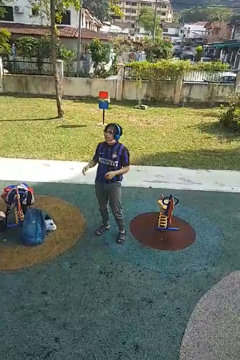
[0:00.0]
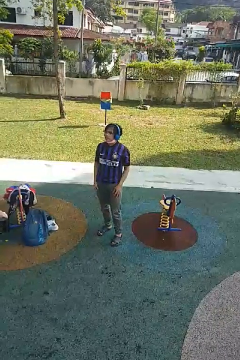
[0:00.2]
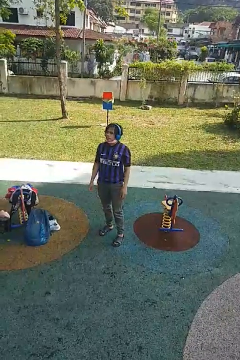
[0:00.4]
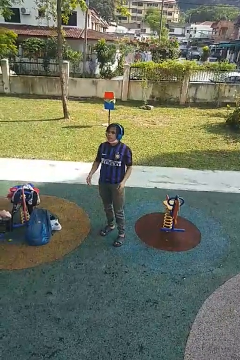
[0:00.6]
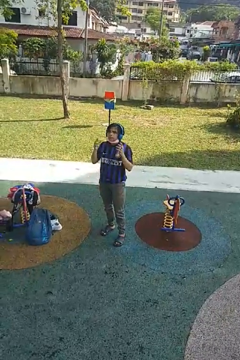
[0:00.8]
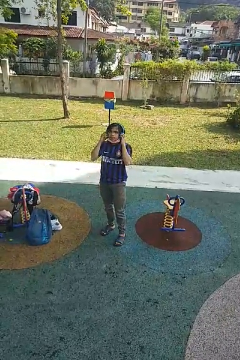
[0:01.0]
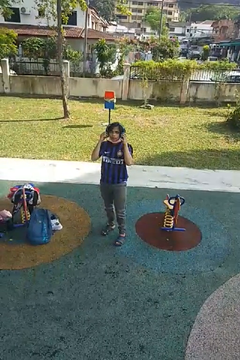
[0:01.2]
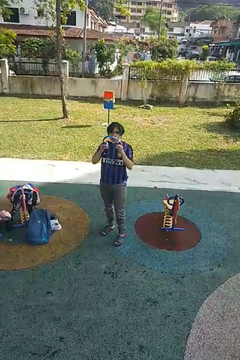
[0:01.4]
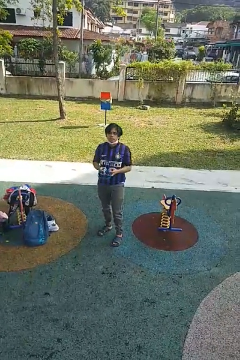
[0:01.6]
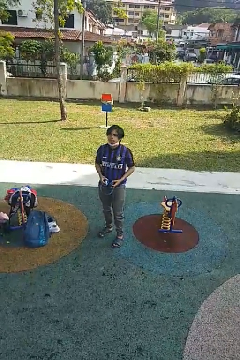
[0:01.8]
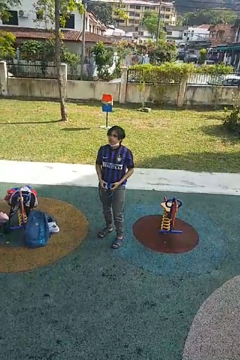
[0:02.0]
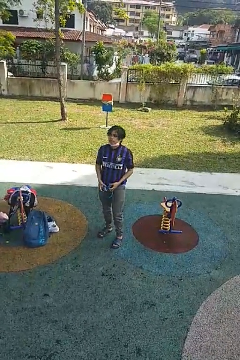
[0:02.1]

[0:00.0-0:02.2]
person takes off headphones

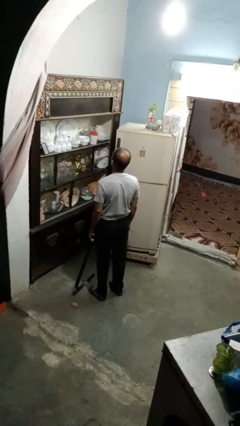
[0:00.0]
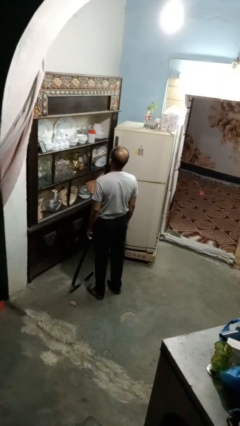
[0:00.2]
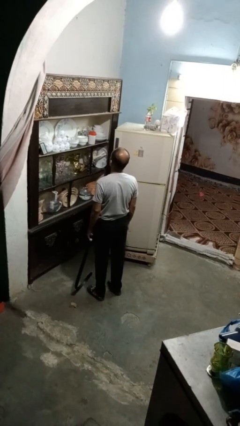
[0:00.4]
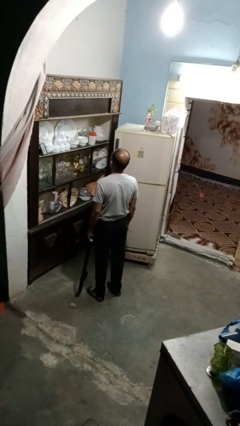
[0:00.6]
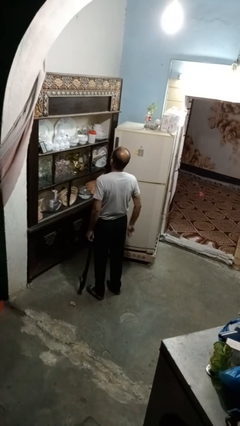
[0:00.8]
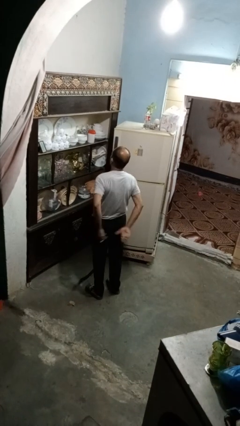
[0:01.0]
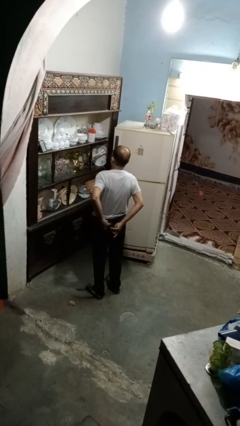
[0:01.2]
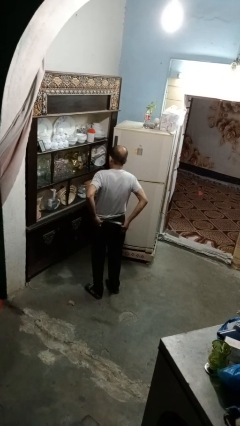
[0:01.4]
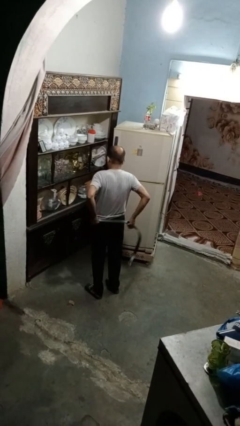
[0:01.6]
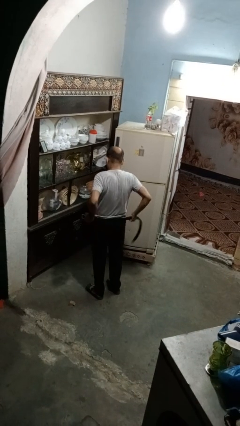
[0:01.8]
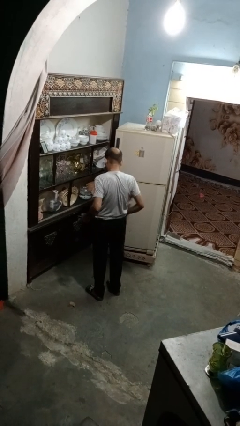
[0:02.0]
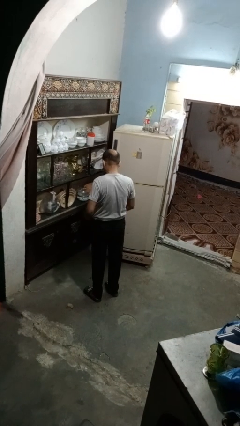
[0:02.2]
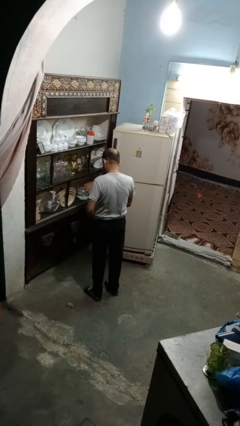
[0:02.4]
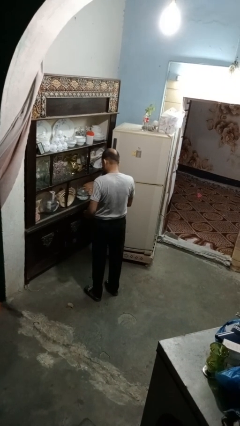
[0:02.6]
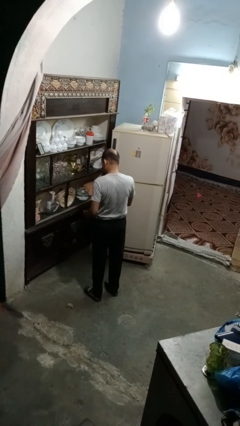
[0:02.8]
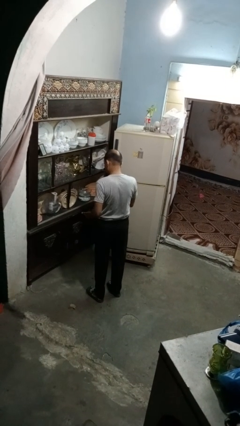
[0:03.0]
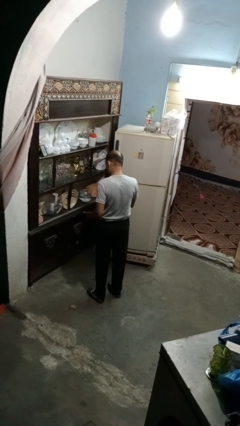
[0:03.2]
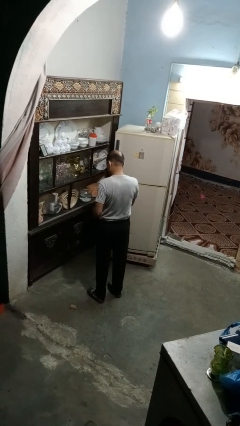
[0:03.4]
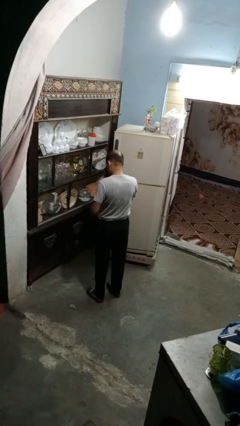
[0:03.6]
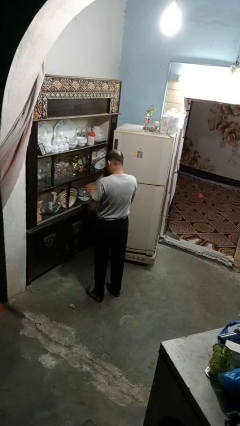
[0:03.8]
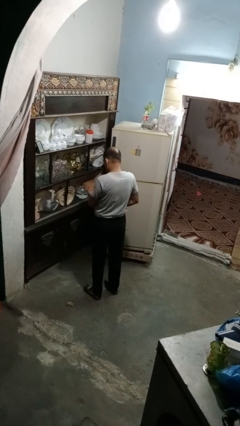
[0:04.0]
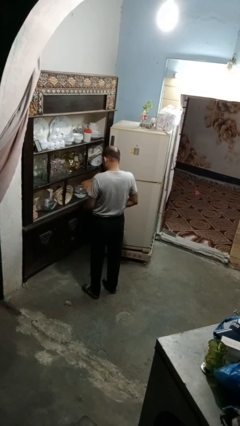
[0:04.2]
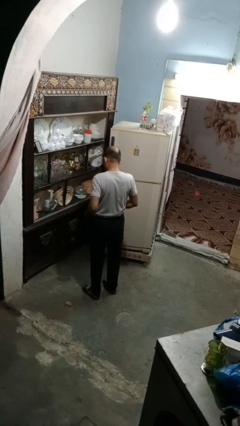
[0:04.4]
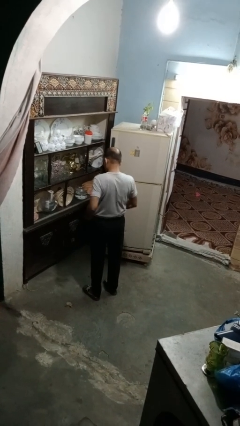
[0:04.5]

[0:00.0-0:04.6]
person puts on belt

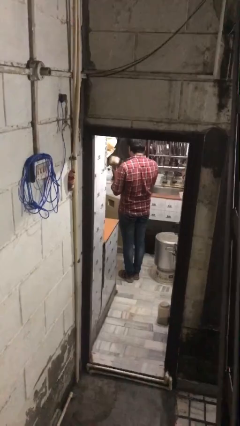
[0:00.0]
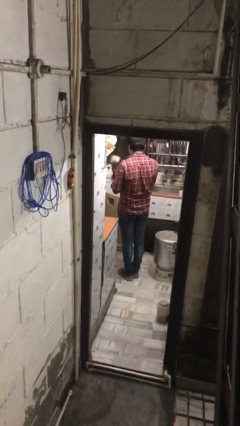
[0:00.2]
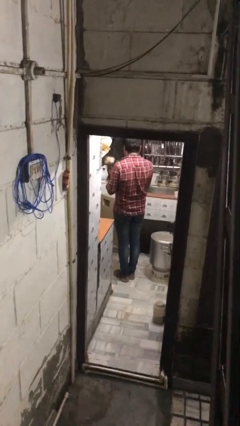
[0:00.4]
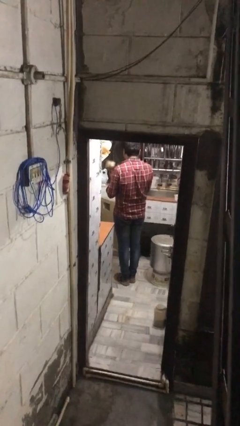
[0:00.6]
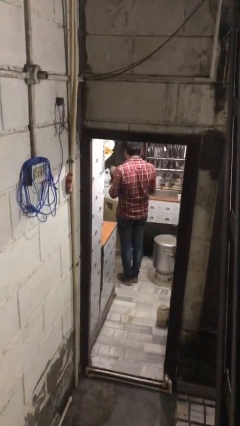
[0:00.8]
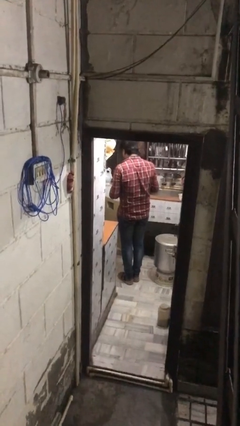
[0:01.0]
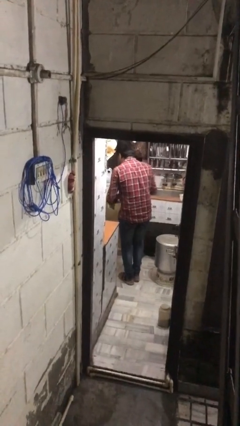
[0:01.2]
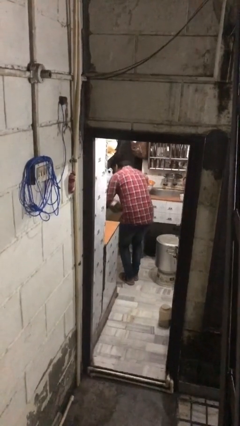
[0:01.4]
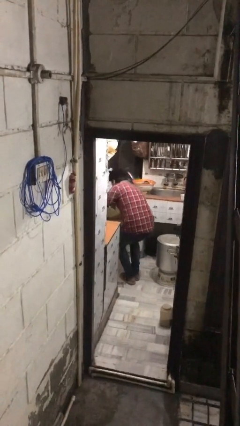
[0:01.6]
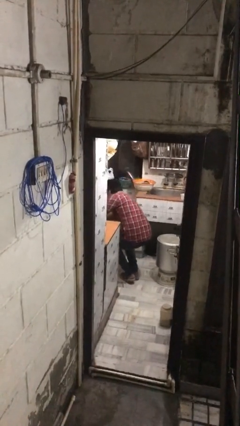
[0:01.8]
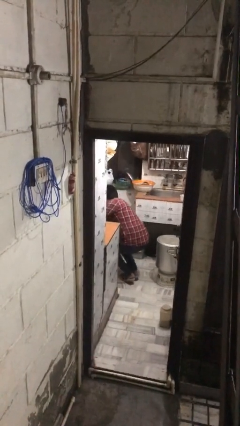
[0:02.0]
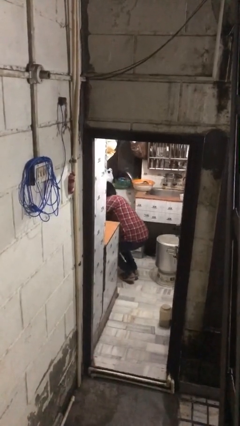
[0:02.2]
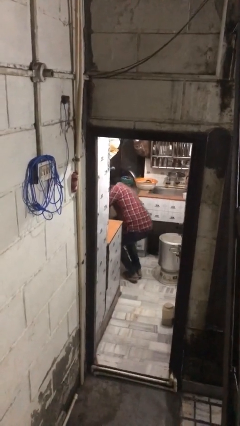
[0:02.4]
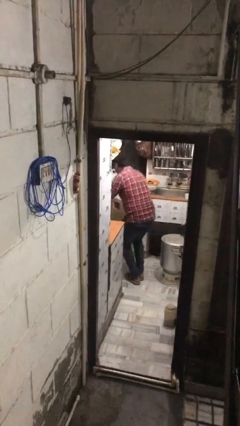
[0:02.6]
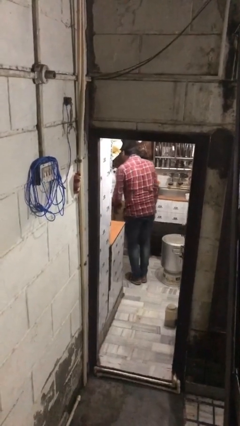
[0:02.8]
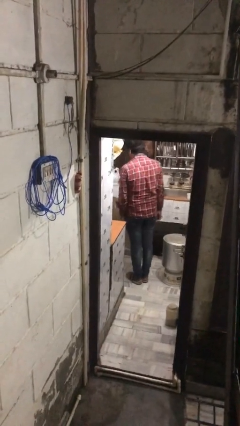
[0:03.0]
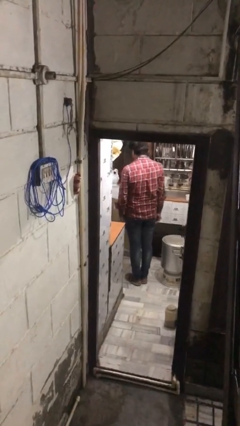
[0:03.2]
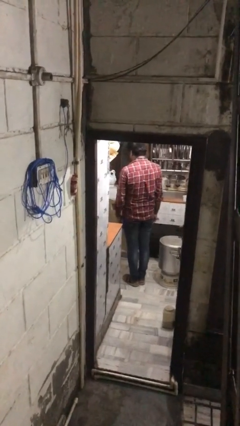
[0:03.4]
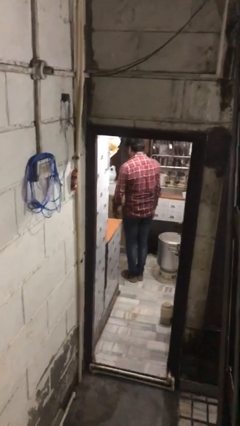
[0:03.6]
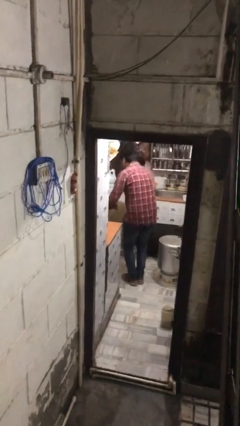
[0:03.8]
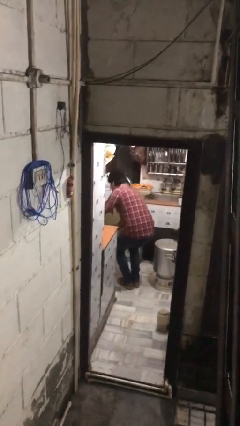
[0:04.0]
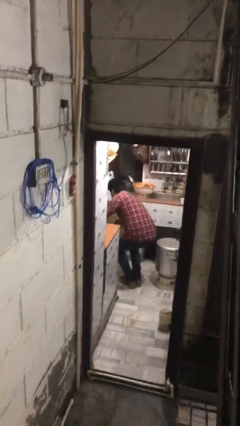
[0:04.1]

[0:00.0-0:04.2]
person puts object into kitchen drawer

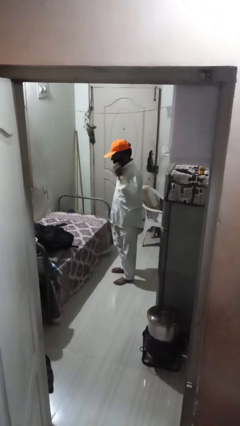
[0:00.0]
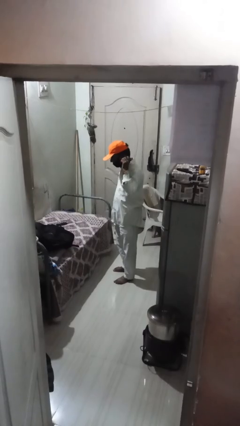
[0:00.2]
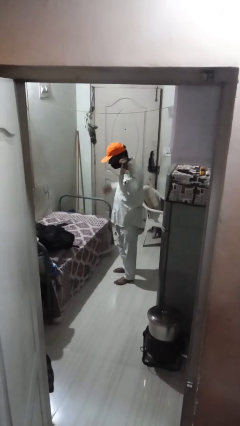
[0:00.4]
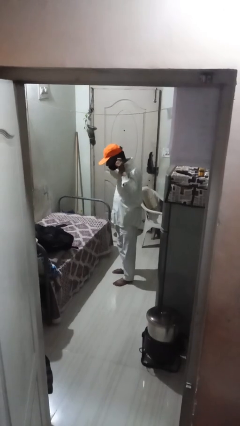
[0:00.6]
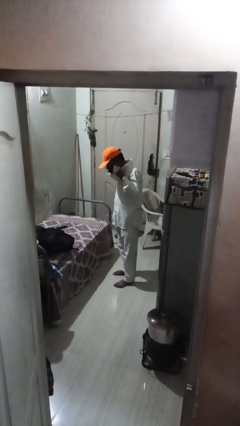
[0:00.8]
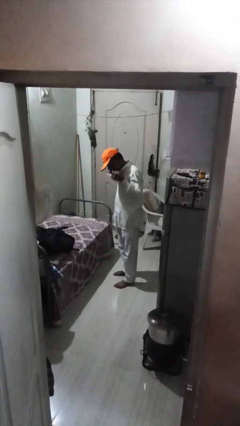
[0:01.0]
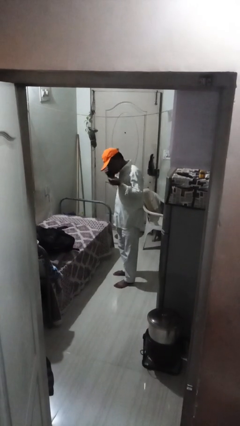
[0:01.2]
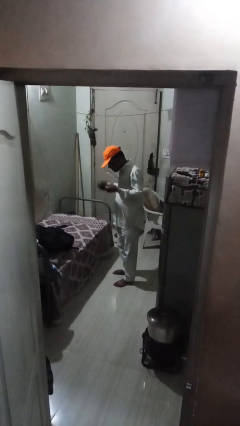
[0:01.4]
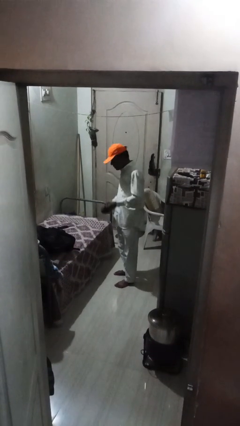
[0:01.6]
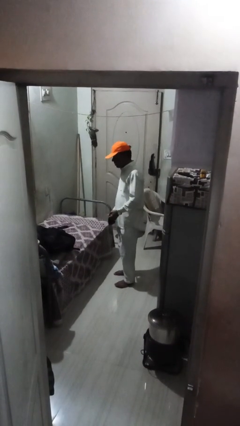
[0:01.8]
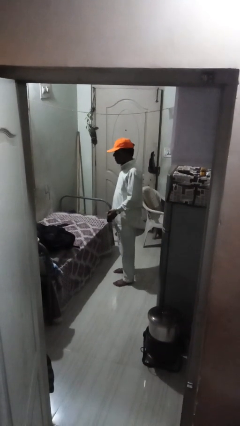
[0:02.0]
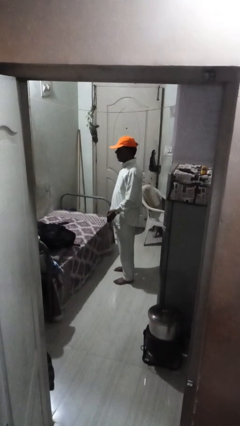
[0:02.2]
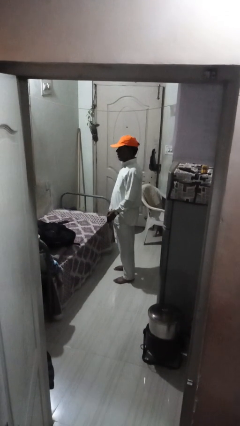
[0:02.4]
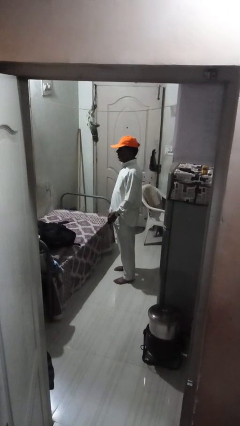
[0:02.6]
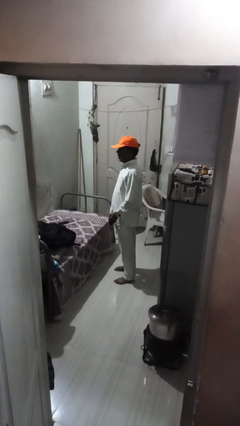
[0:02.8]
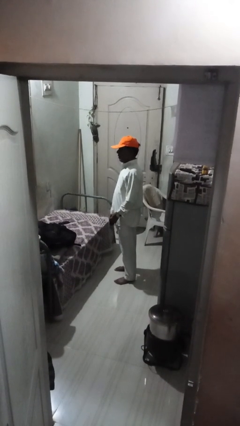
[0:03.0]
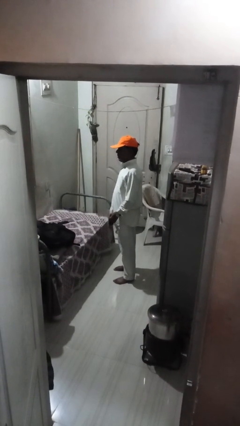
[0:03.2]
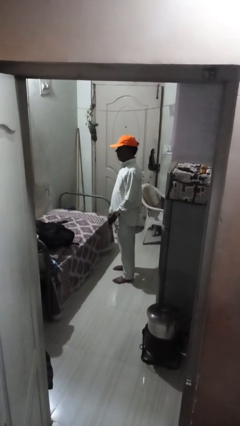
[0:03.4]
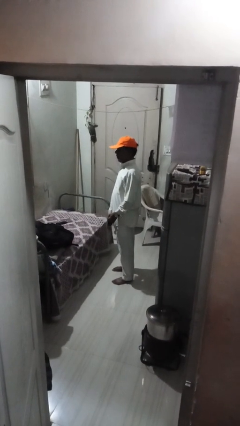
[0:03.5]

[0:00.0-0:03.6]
person takes off facemask

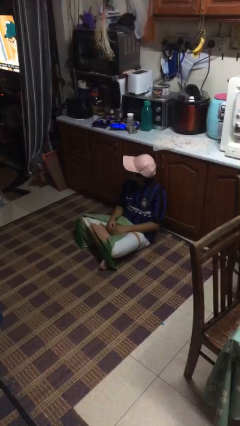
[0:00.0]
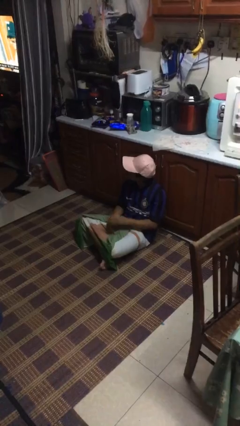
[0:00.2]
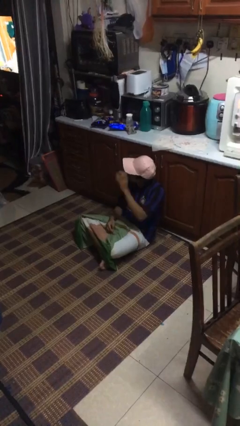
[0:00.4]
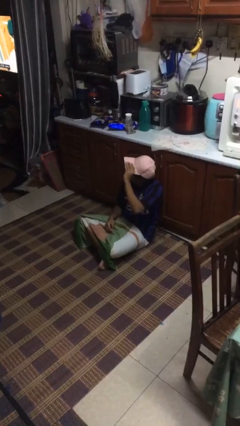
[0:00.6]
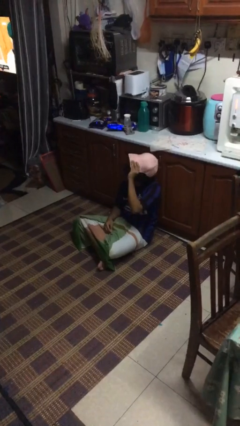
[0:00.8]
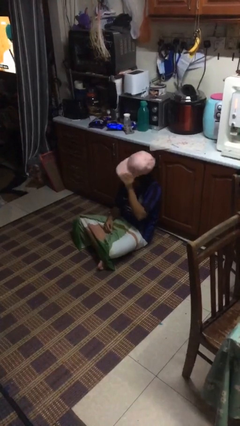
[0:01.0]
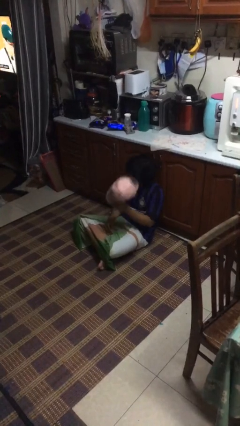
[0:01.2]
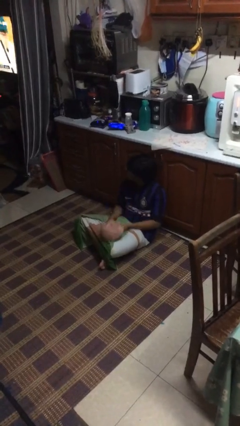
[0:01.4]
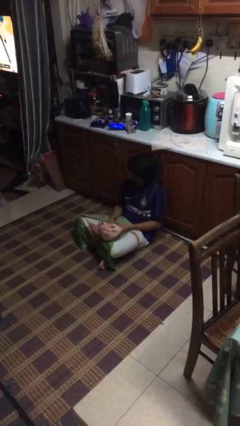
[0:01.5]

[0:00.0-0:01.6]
person takes off hat

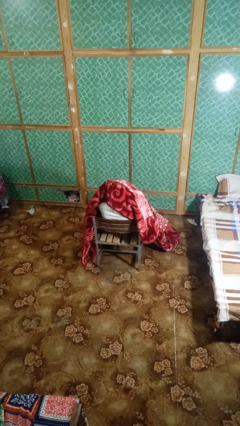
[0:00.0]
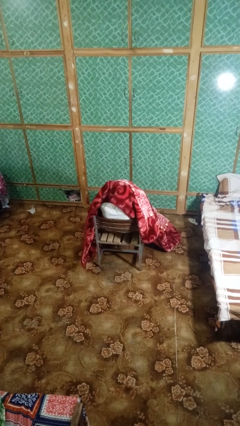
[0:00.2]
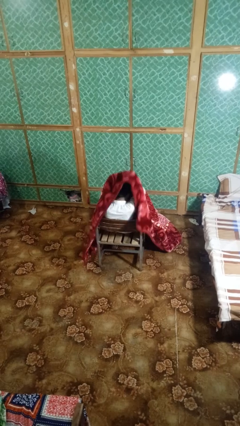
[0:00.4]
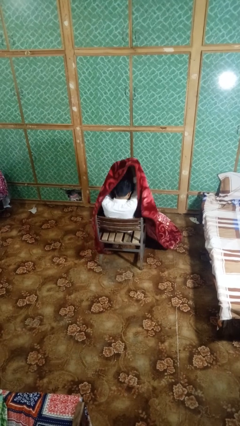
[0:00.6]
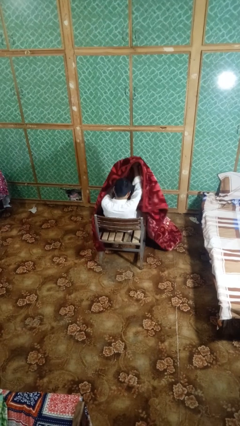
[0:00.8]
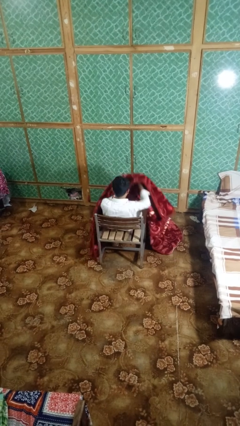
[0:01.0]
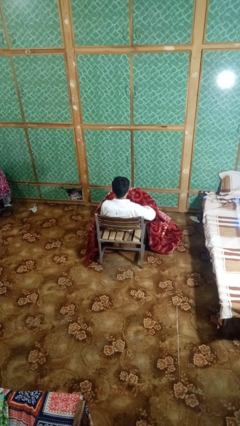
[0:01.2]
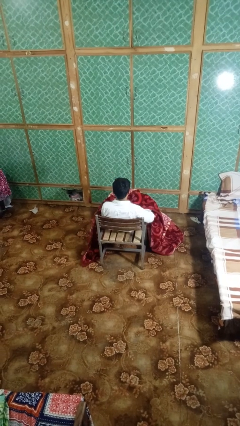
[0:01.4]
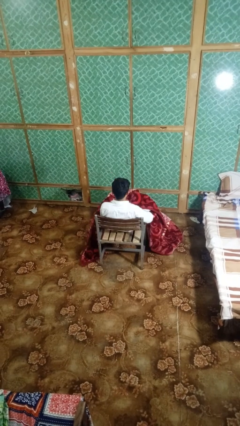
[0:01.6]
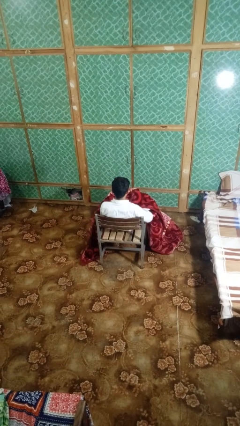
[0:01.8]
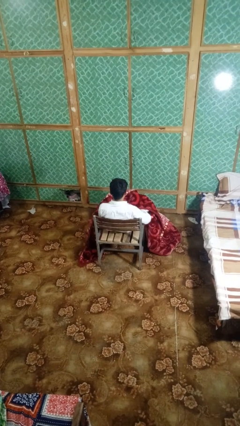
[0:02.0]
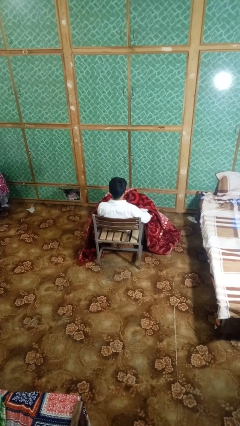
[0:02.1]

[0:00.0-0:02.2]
person uncovers with blanket
